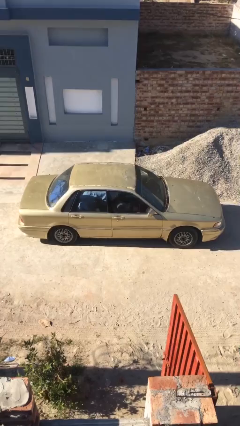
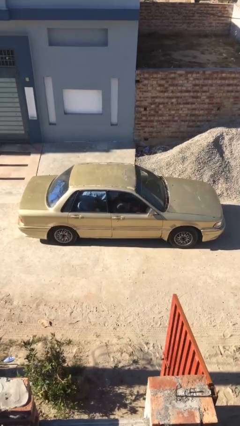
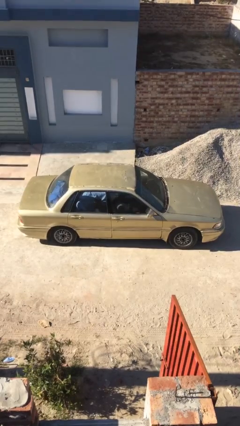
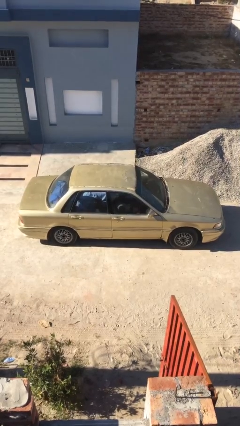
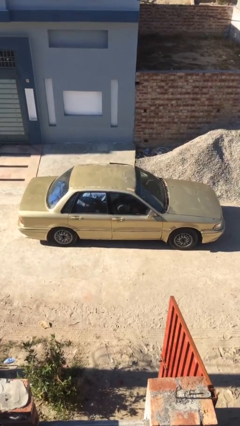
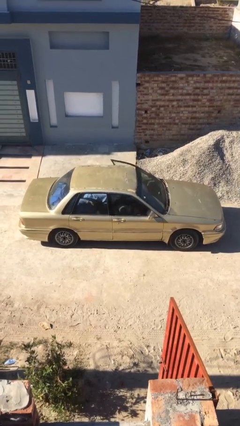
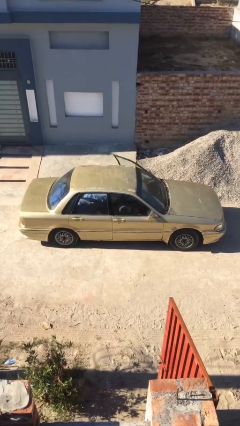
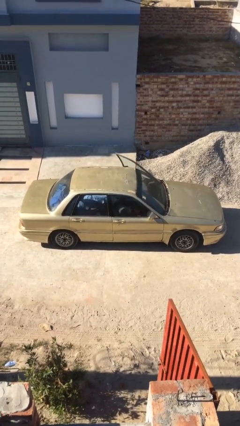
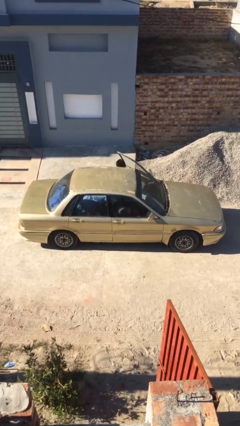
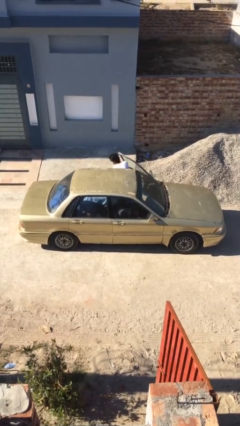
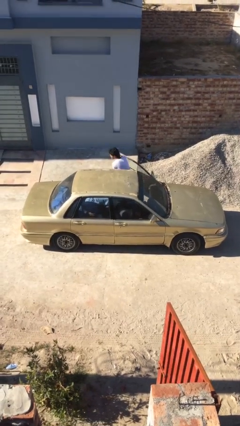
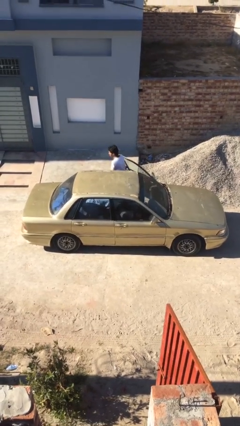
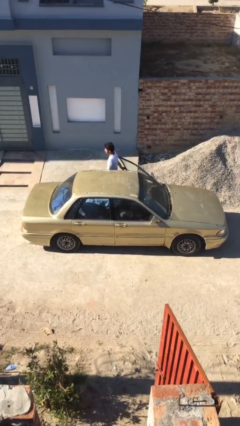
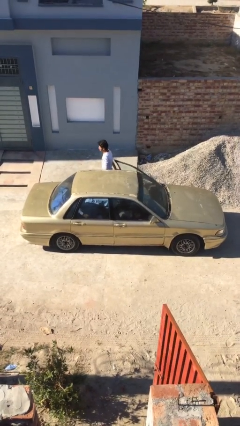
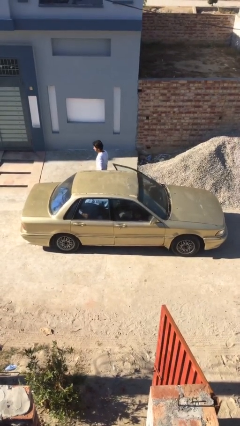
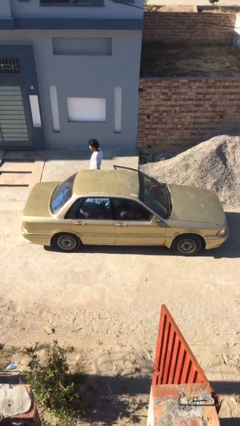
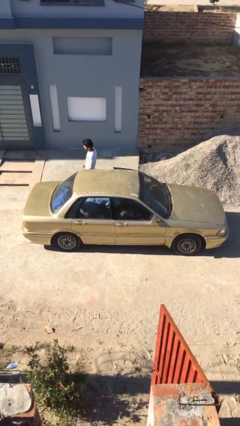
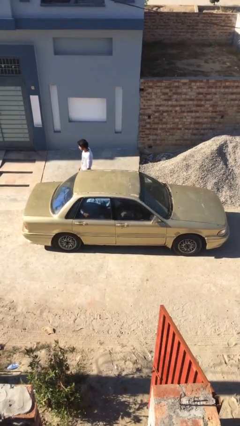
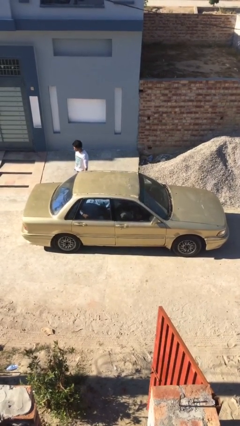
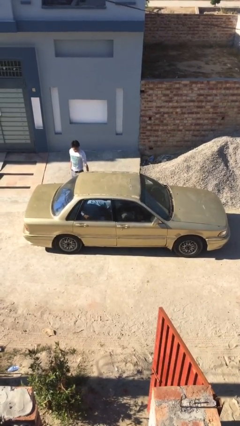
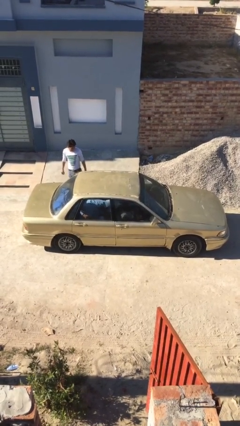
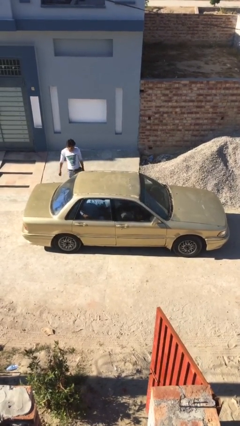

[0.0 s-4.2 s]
car drops off person

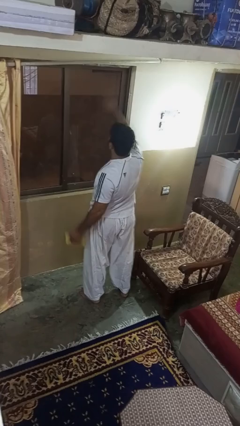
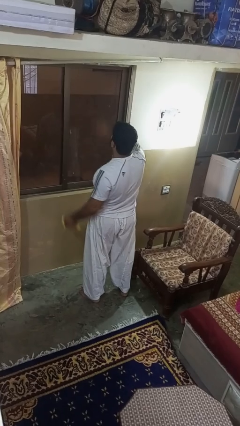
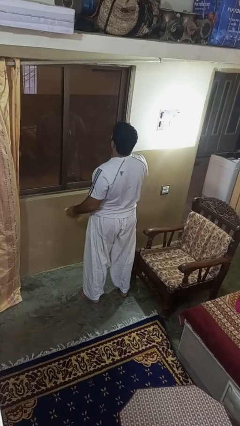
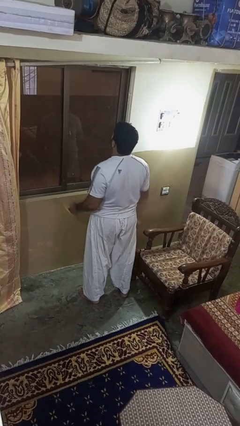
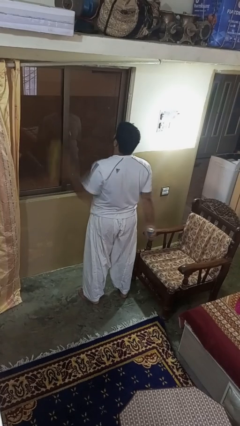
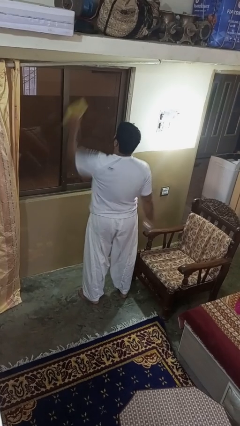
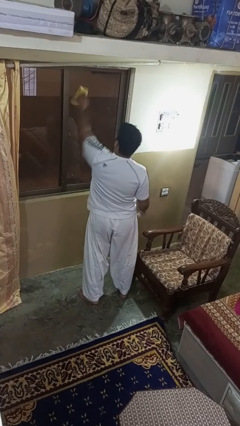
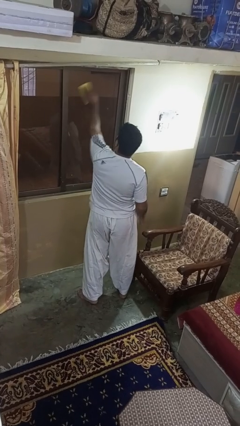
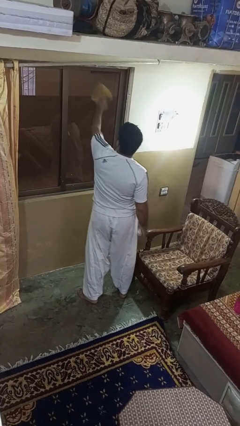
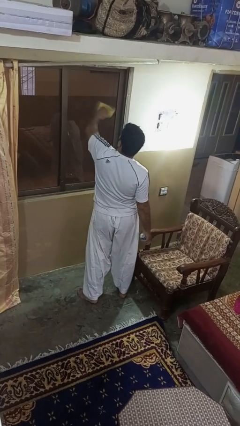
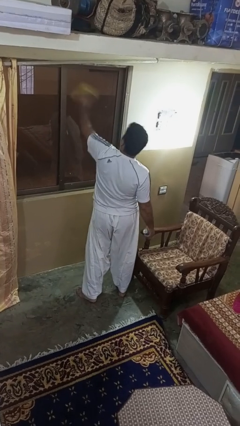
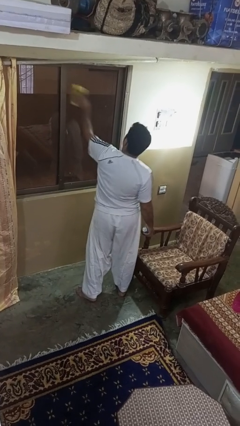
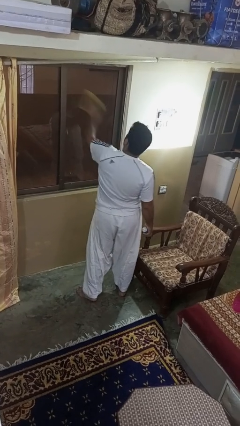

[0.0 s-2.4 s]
person washes window

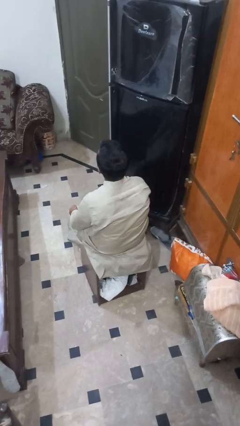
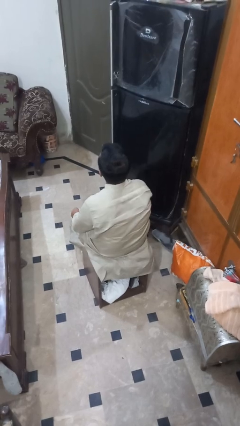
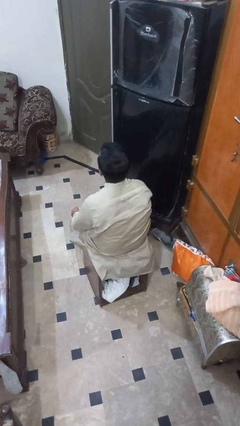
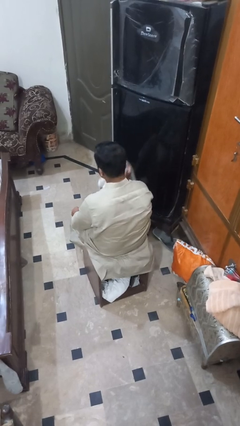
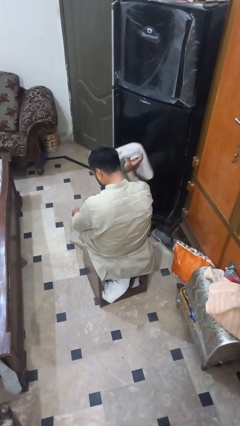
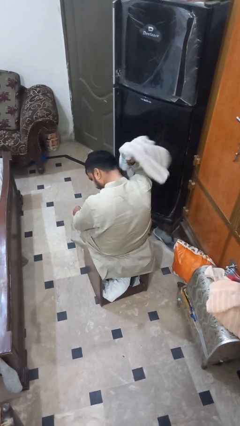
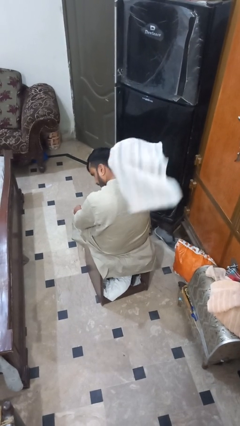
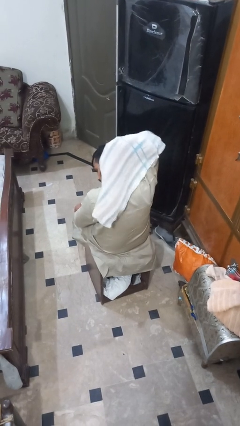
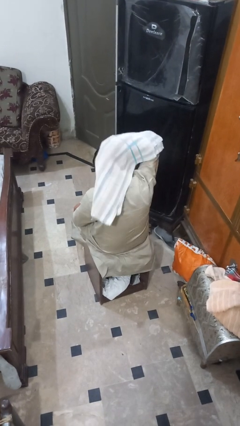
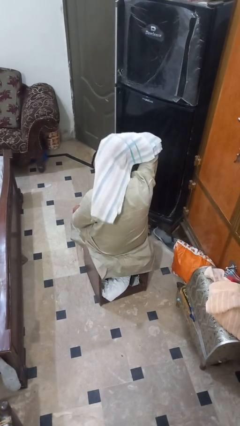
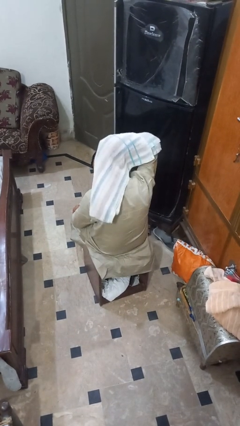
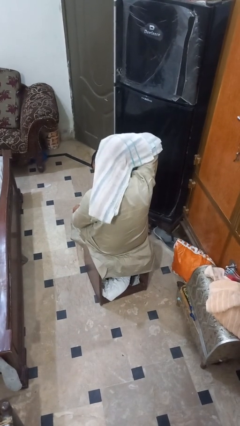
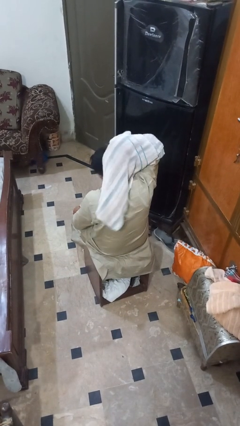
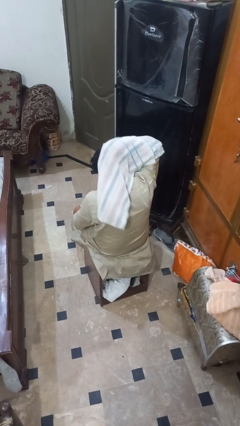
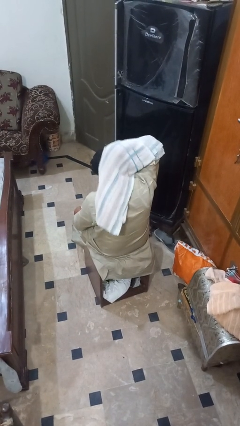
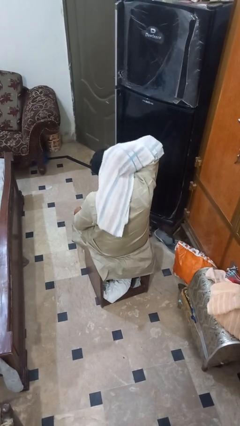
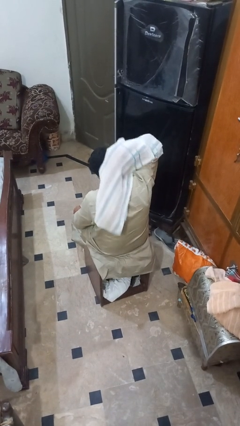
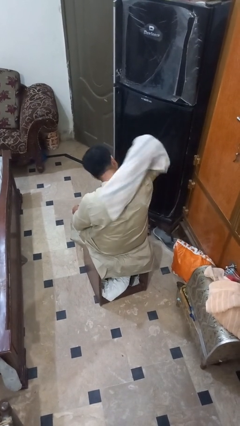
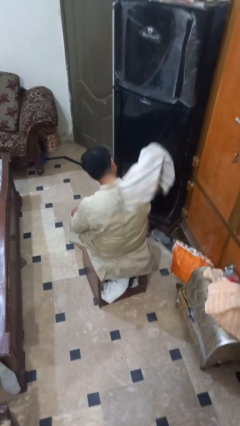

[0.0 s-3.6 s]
person dries hair with towel

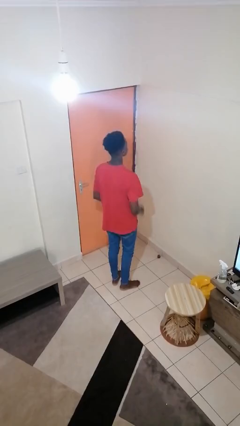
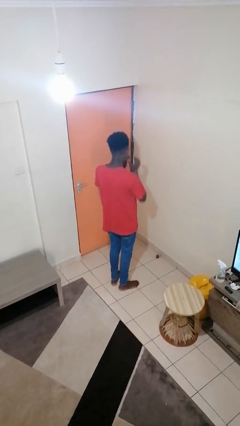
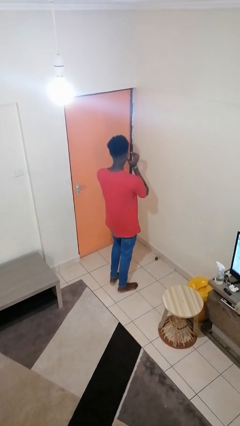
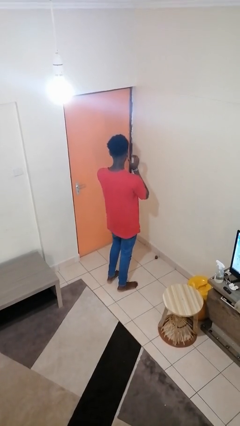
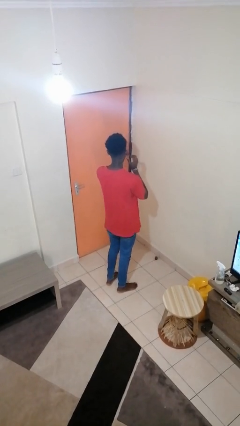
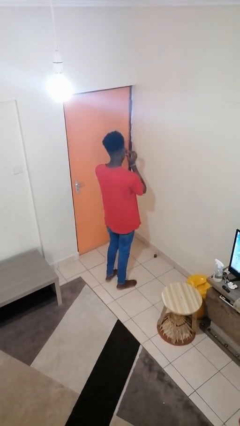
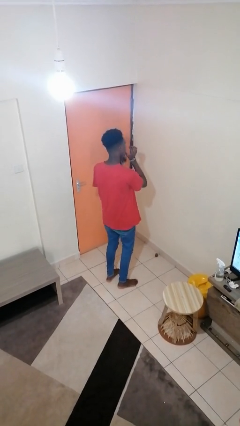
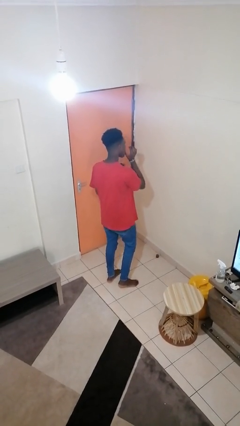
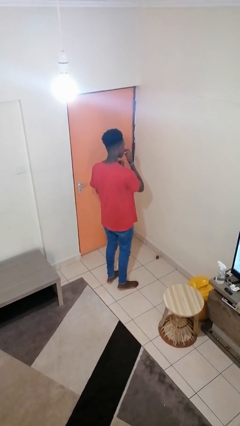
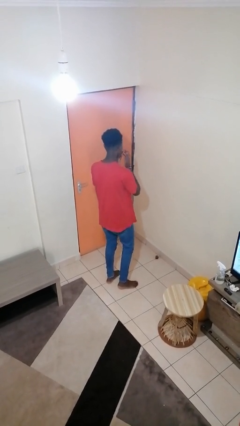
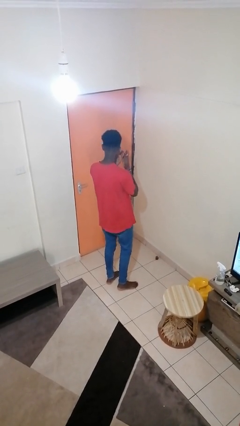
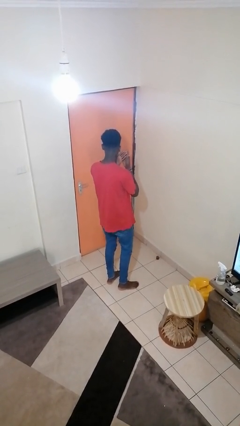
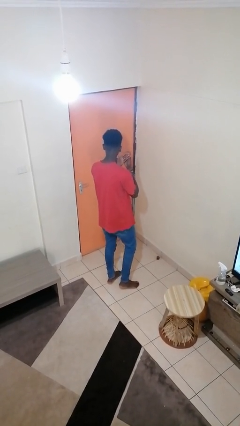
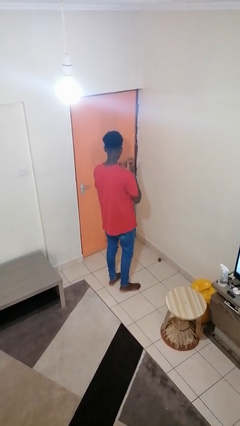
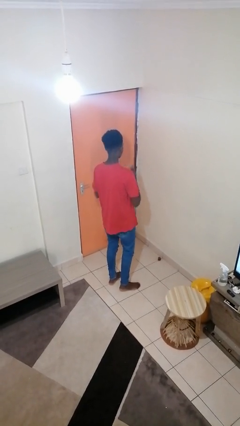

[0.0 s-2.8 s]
person licks fingers

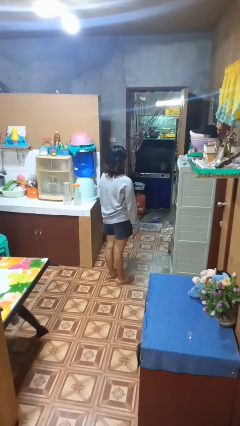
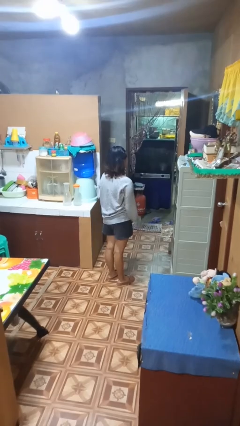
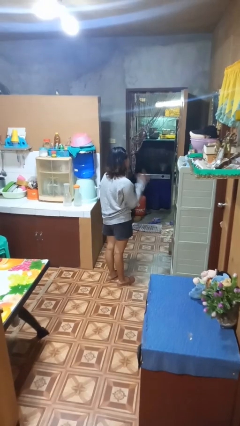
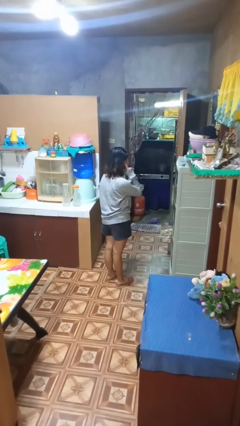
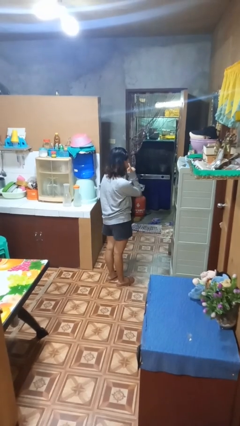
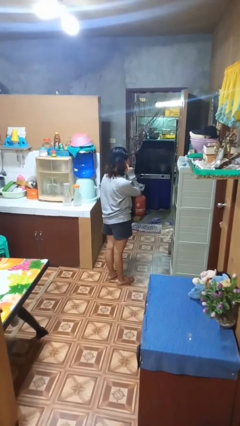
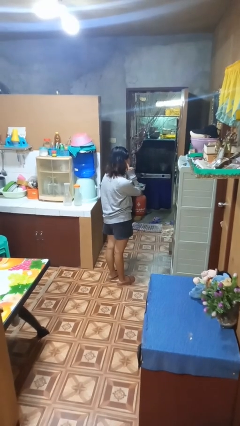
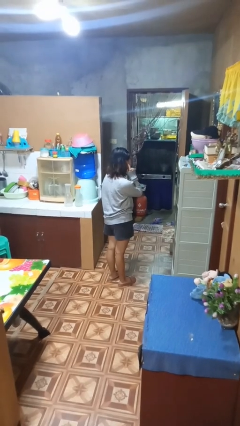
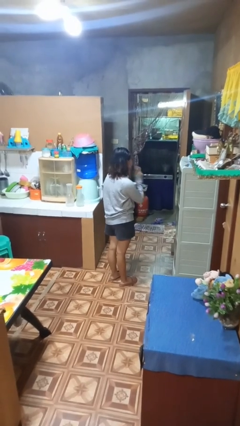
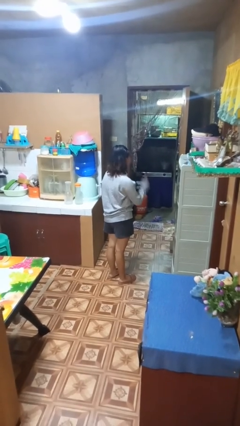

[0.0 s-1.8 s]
person gestures listen closely

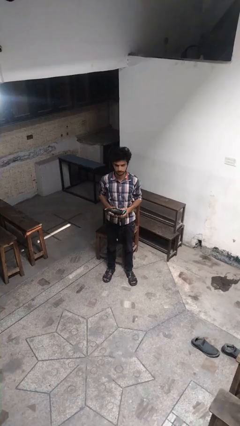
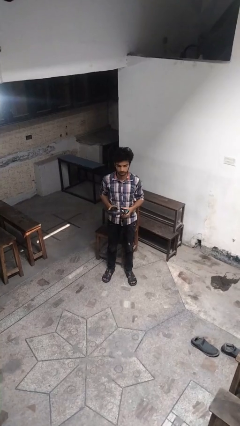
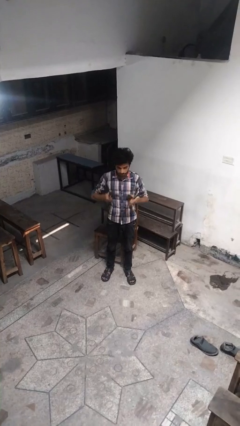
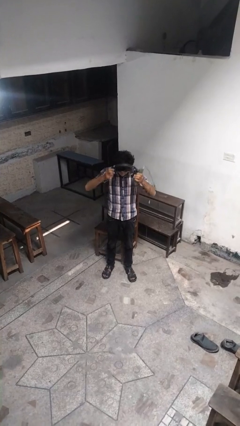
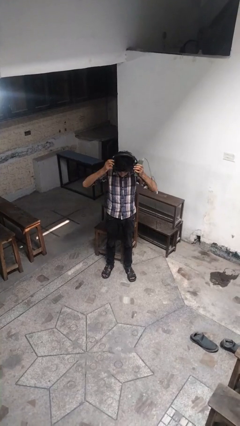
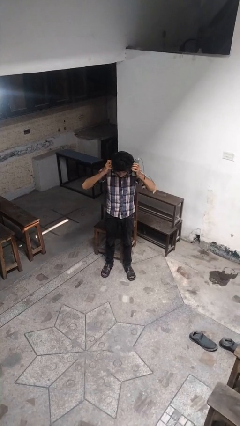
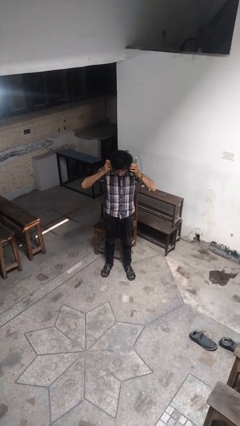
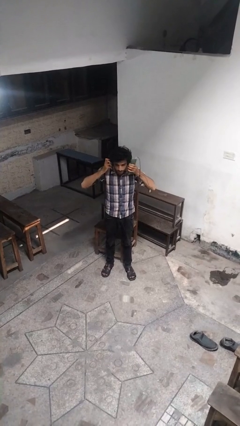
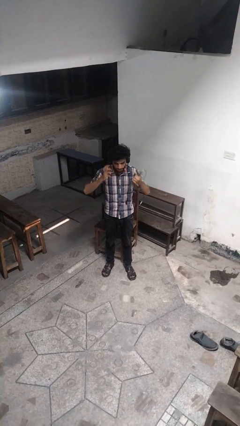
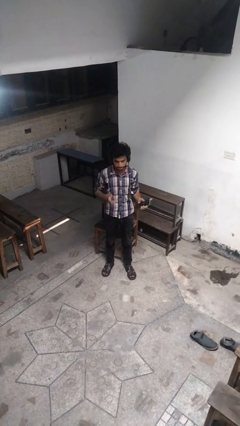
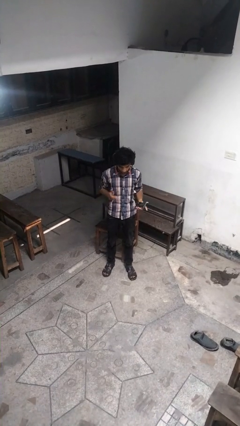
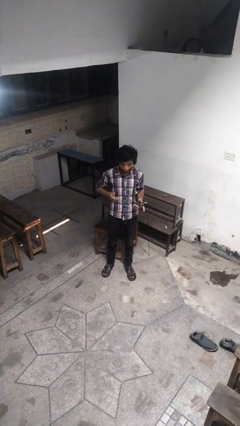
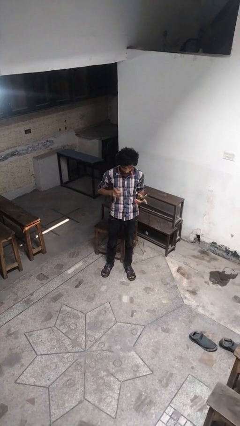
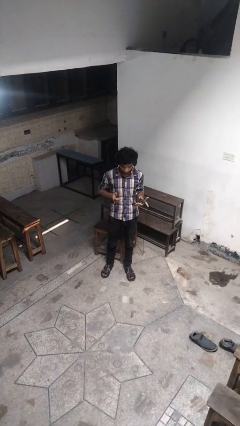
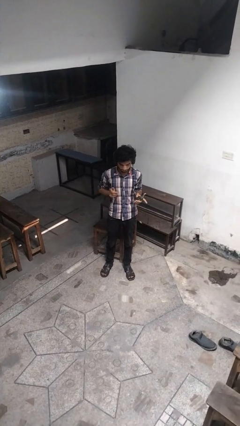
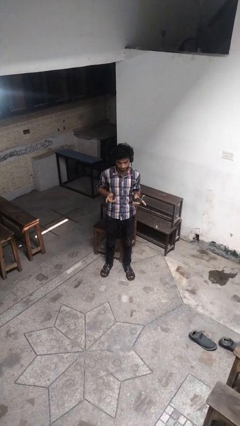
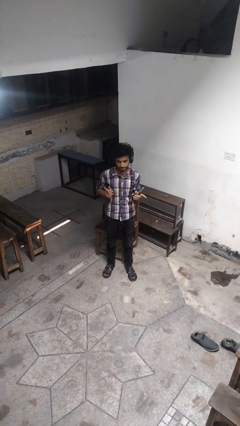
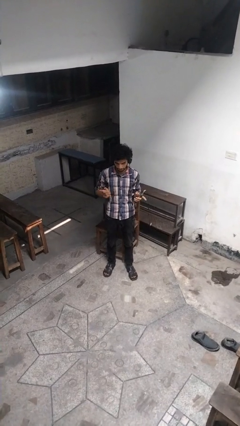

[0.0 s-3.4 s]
person puts on headphones
